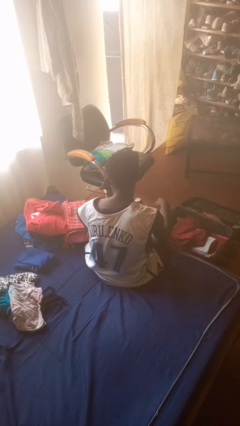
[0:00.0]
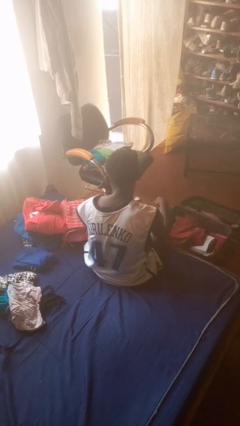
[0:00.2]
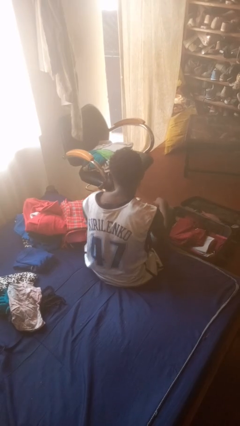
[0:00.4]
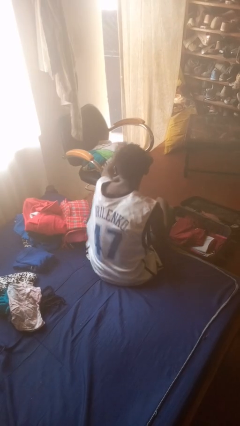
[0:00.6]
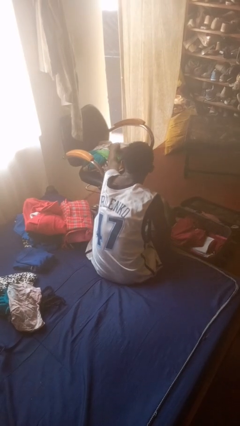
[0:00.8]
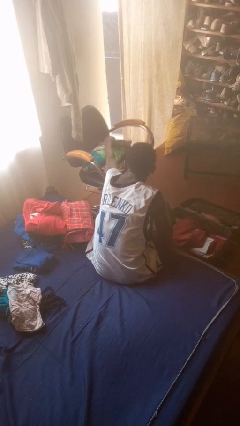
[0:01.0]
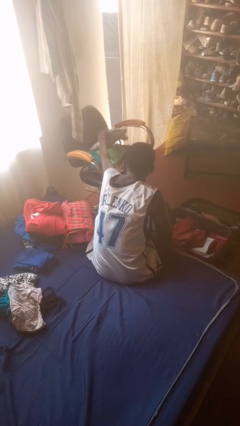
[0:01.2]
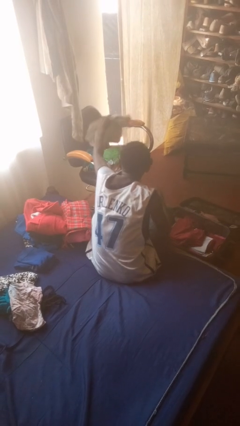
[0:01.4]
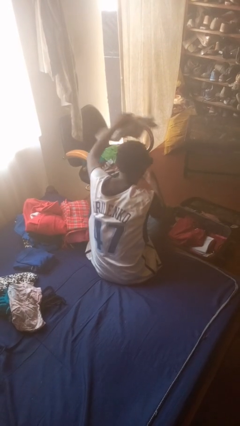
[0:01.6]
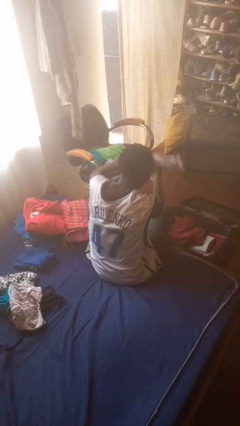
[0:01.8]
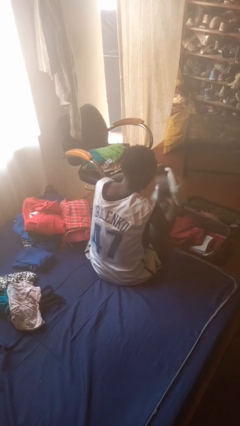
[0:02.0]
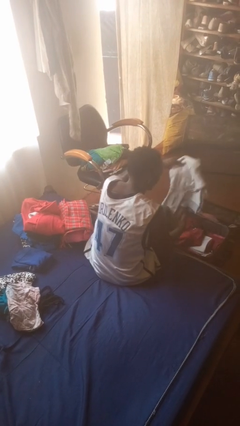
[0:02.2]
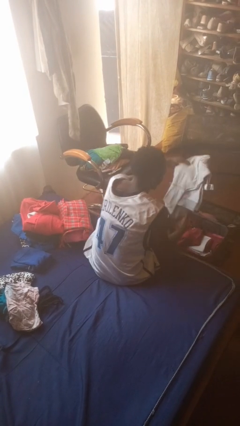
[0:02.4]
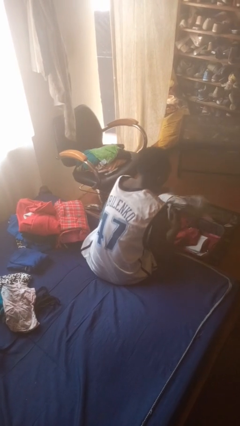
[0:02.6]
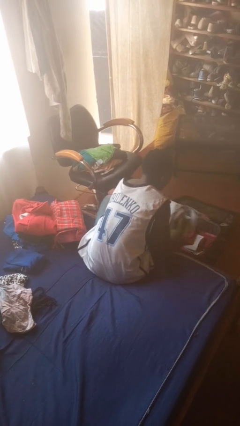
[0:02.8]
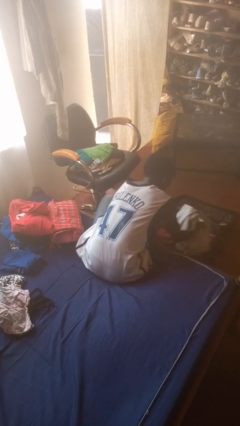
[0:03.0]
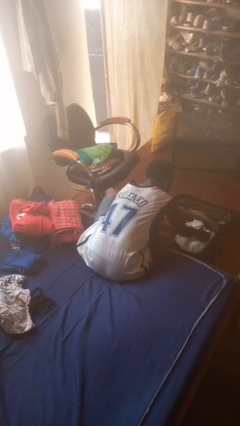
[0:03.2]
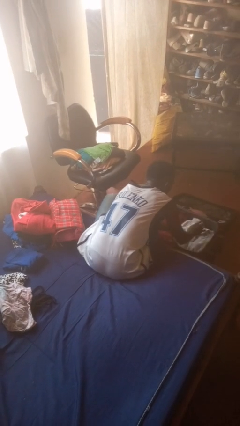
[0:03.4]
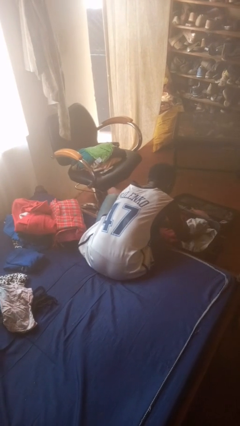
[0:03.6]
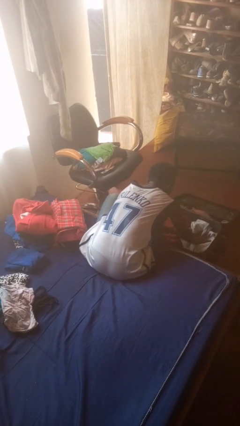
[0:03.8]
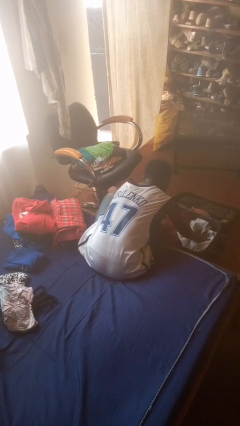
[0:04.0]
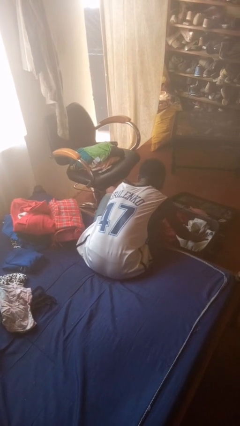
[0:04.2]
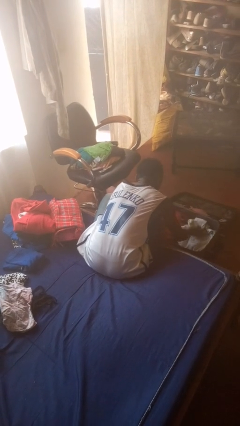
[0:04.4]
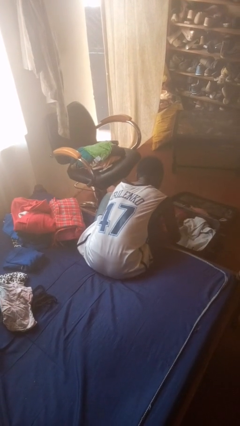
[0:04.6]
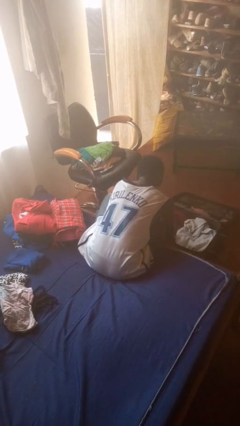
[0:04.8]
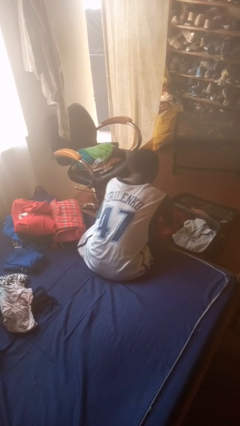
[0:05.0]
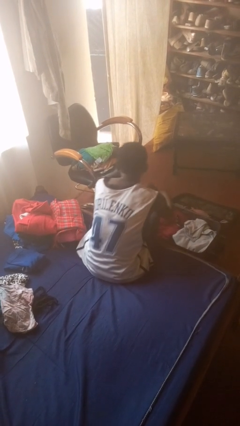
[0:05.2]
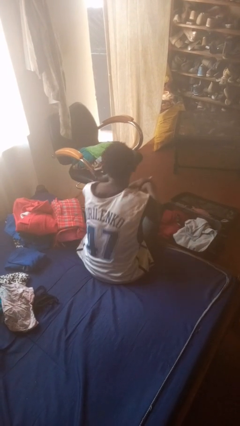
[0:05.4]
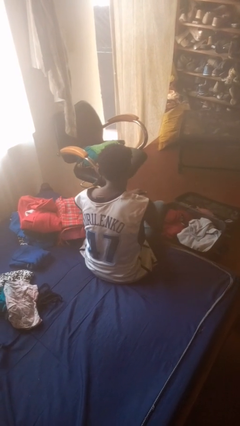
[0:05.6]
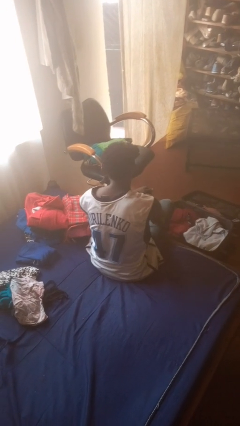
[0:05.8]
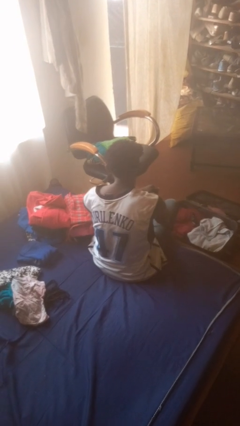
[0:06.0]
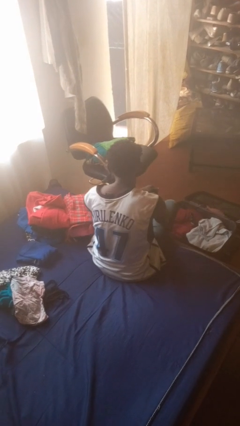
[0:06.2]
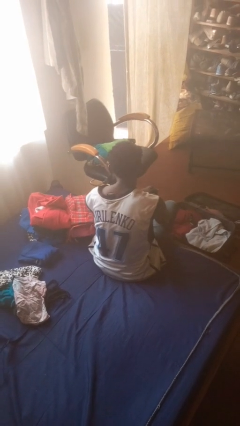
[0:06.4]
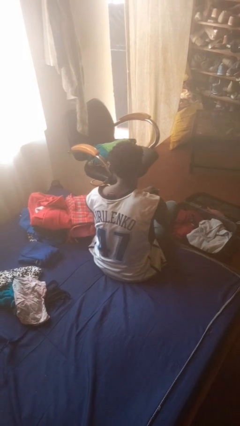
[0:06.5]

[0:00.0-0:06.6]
person loads clothes into suitcase

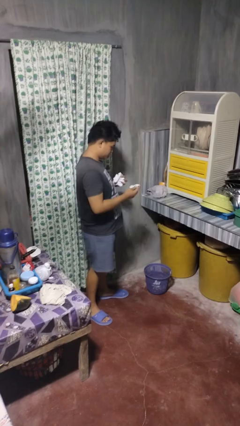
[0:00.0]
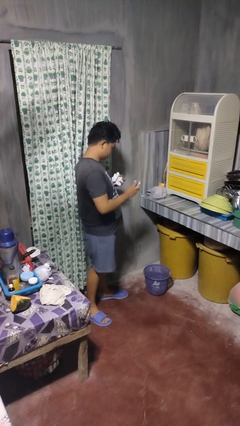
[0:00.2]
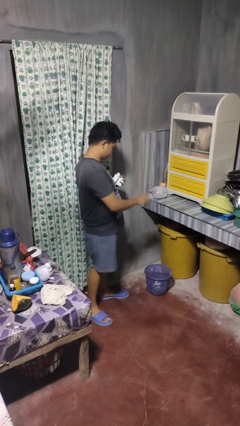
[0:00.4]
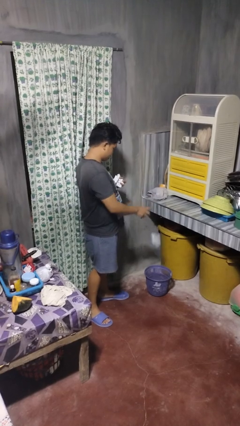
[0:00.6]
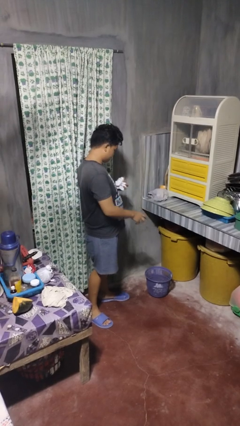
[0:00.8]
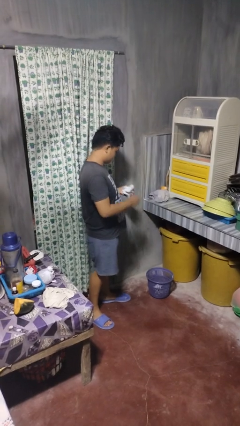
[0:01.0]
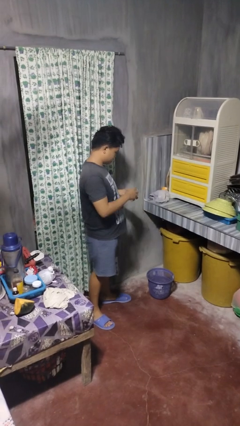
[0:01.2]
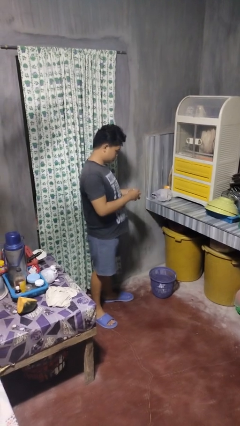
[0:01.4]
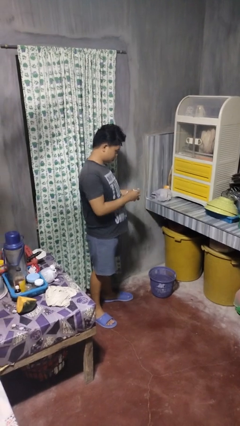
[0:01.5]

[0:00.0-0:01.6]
person discards trash

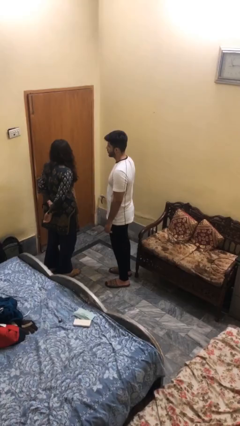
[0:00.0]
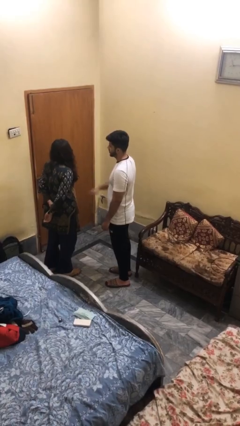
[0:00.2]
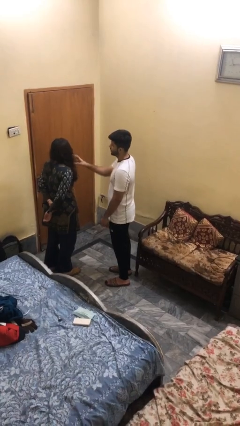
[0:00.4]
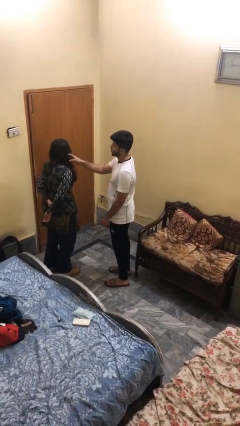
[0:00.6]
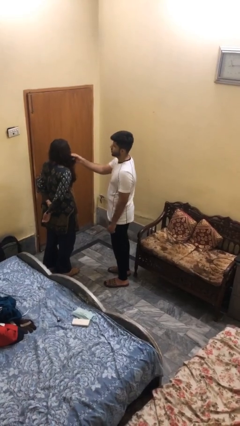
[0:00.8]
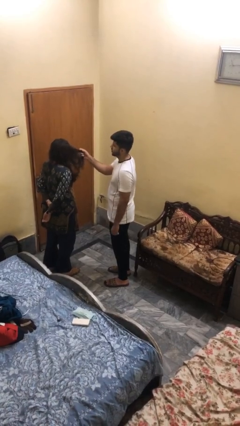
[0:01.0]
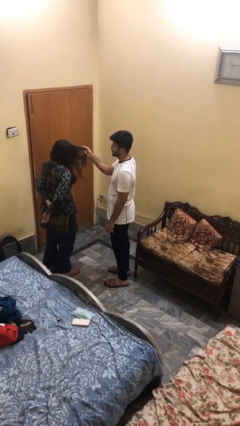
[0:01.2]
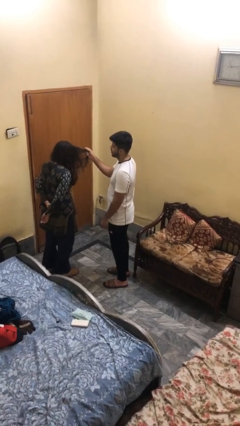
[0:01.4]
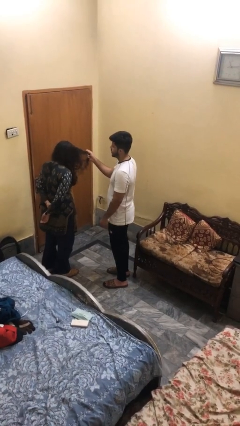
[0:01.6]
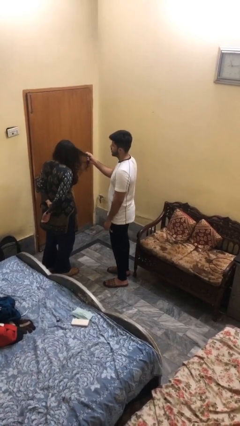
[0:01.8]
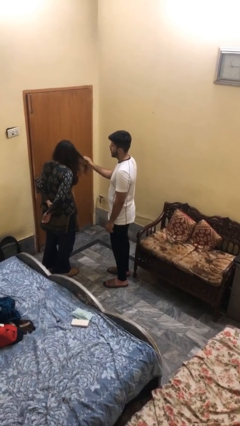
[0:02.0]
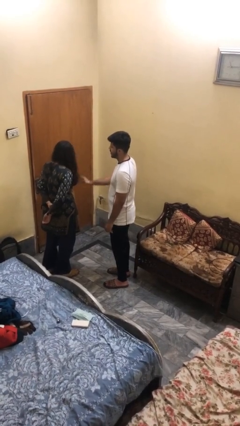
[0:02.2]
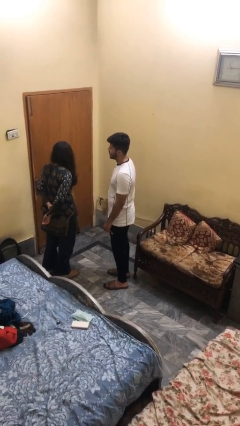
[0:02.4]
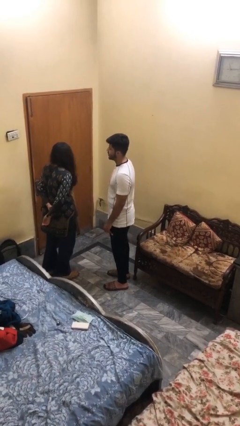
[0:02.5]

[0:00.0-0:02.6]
person grabs person by hair

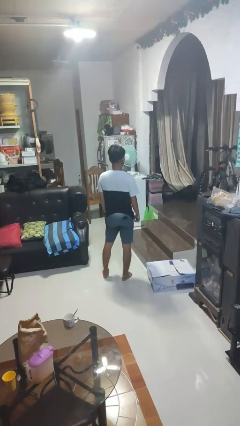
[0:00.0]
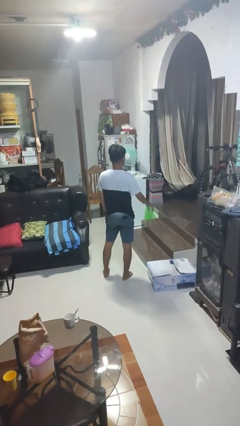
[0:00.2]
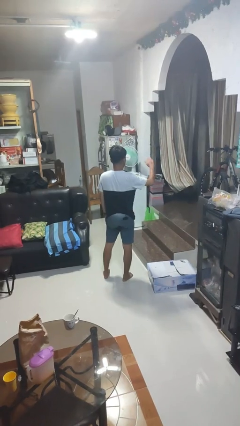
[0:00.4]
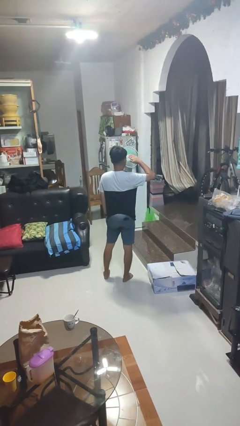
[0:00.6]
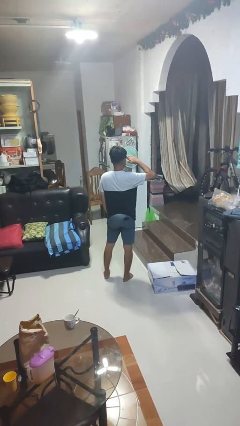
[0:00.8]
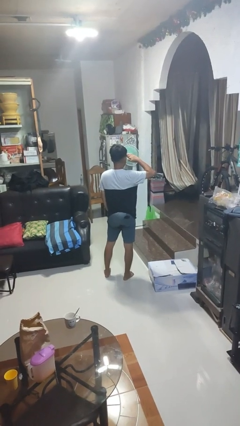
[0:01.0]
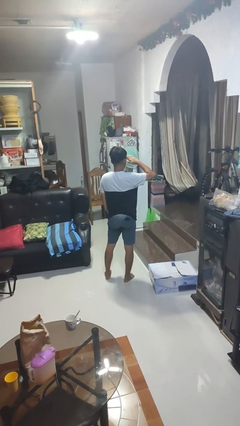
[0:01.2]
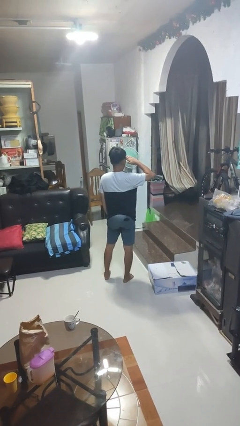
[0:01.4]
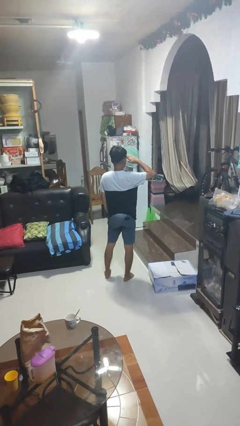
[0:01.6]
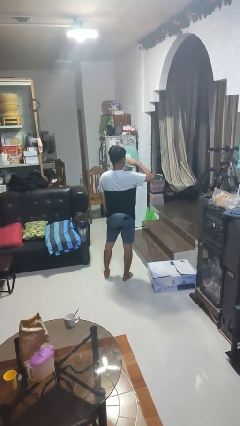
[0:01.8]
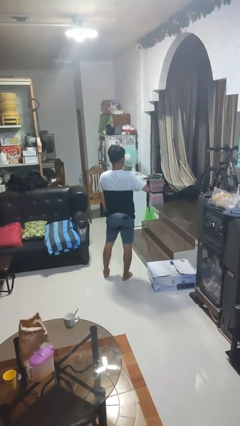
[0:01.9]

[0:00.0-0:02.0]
person salutes

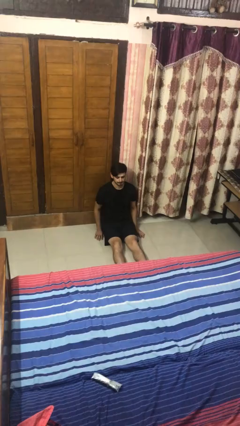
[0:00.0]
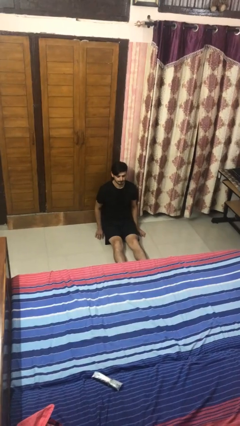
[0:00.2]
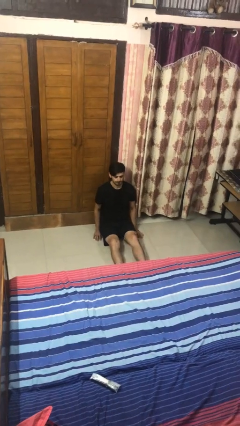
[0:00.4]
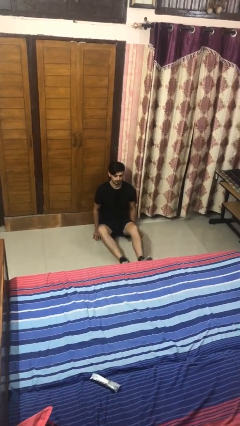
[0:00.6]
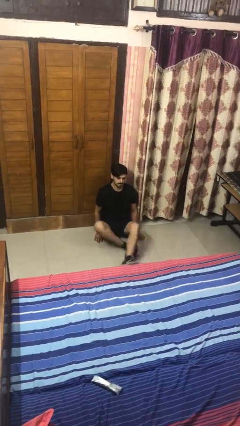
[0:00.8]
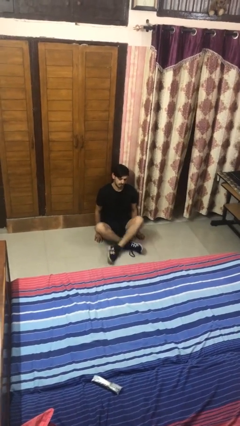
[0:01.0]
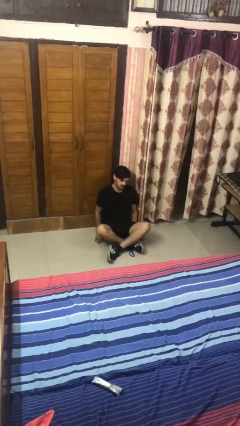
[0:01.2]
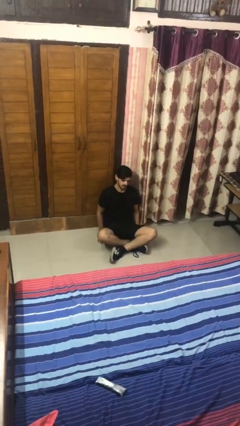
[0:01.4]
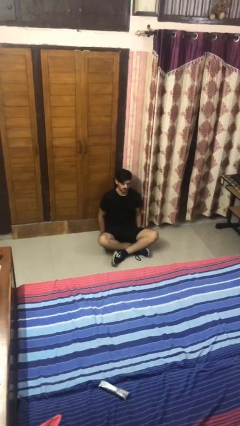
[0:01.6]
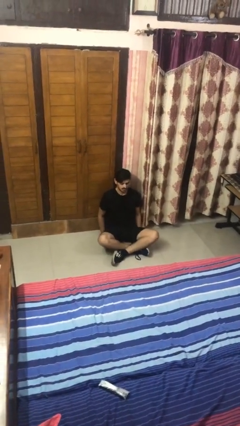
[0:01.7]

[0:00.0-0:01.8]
person crosses legs

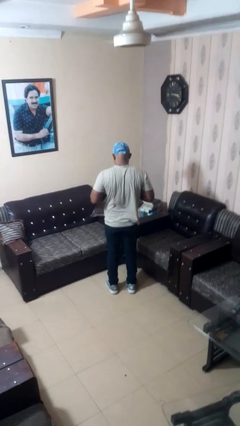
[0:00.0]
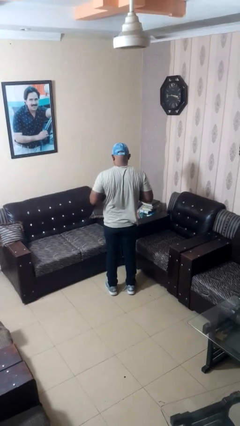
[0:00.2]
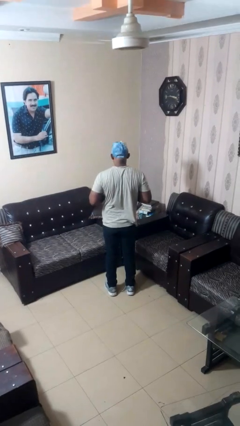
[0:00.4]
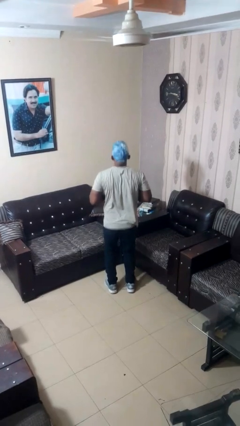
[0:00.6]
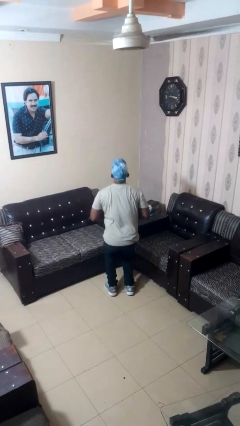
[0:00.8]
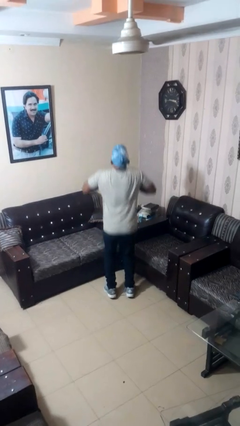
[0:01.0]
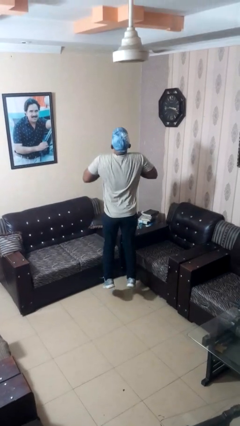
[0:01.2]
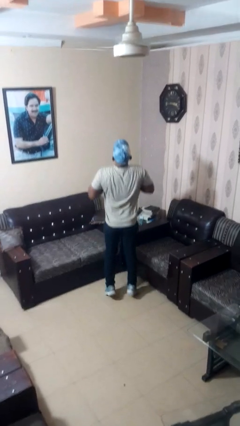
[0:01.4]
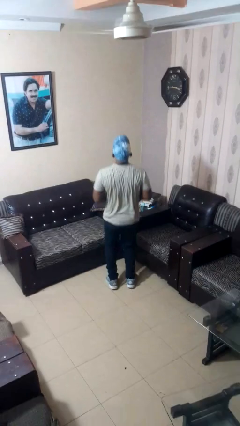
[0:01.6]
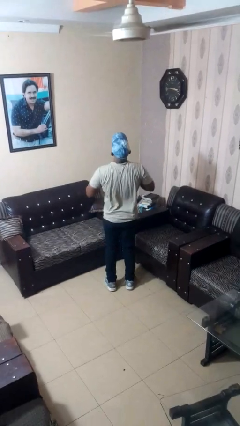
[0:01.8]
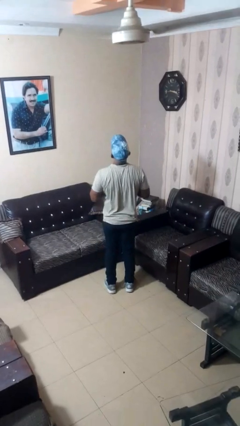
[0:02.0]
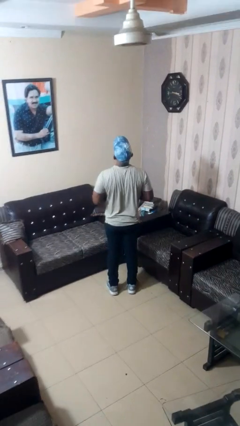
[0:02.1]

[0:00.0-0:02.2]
person jumps
